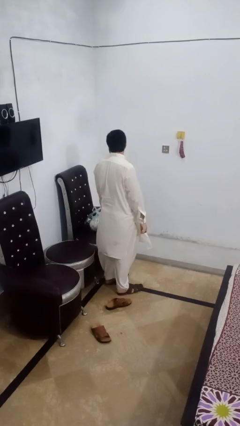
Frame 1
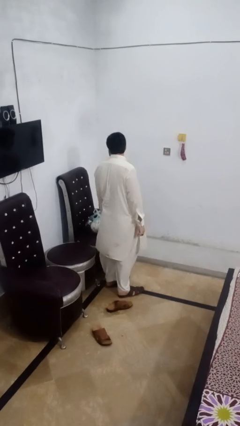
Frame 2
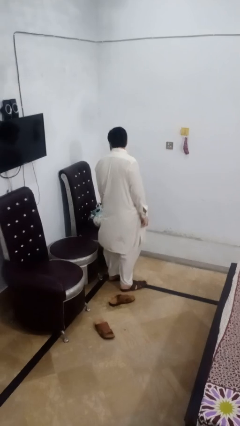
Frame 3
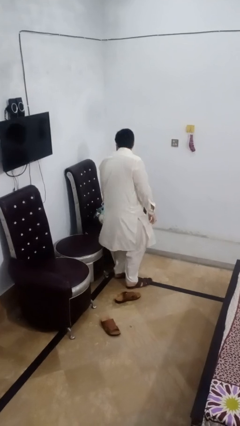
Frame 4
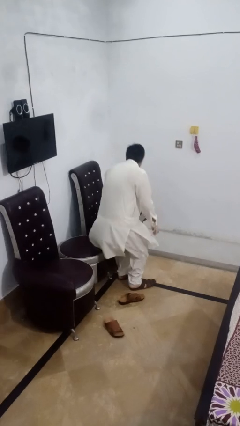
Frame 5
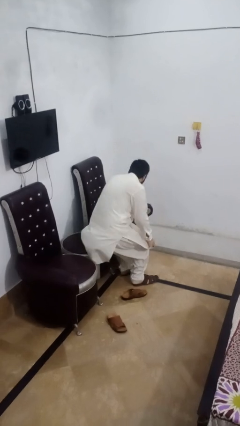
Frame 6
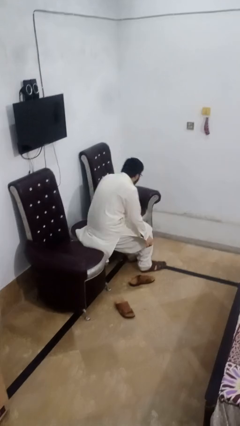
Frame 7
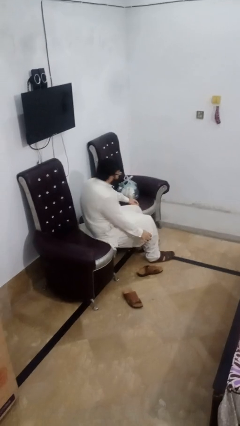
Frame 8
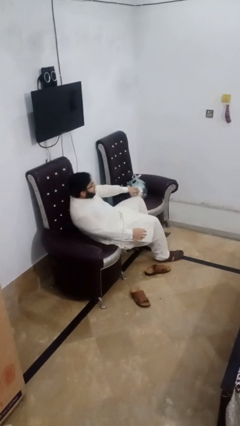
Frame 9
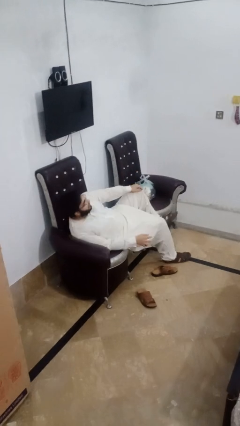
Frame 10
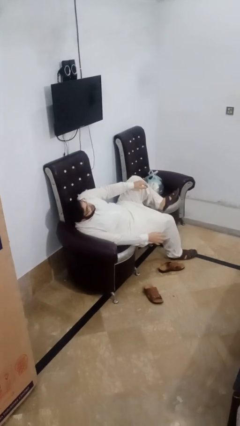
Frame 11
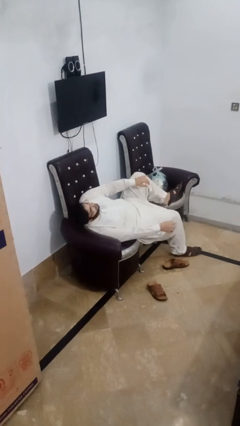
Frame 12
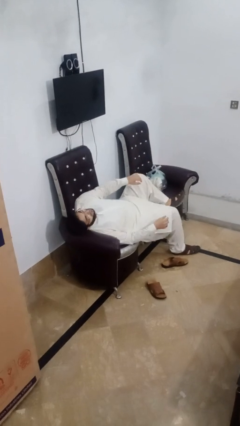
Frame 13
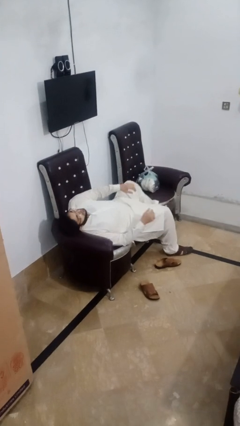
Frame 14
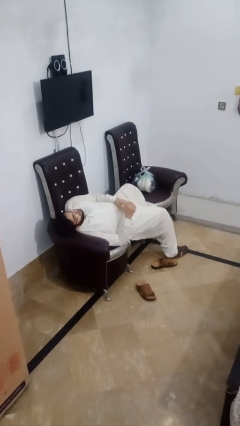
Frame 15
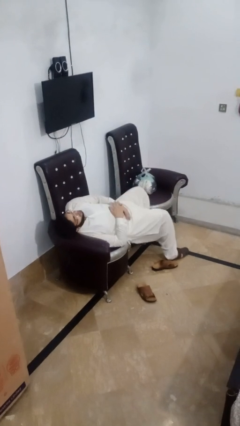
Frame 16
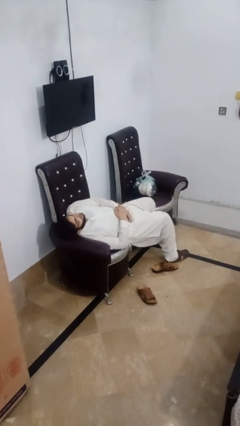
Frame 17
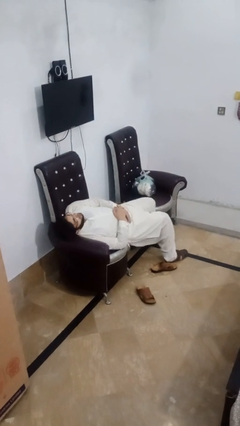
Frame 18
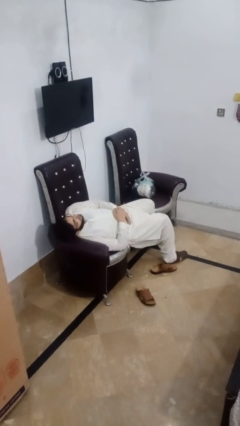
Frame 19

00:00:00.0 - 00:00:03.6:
person lies down on couch

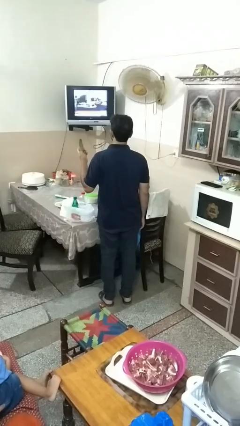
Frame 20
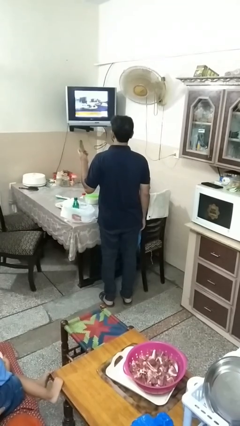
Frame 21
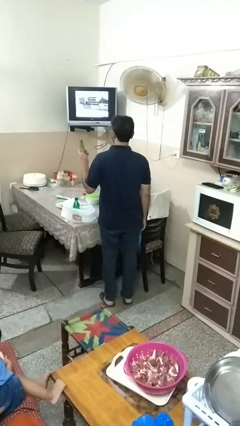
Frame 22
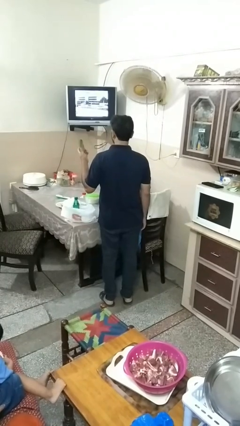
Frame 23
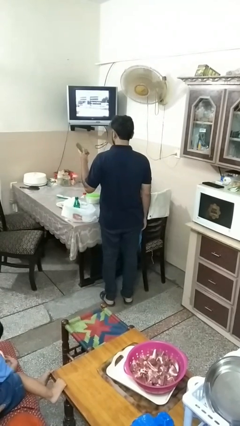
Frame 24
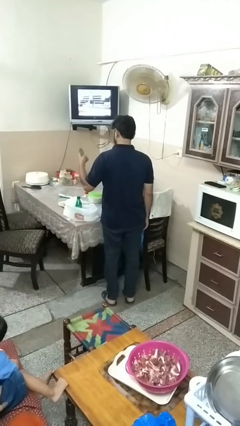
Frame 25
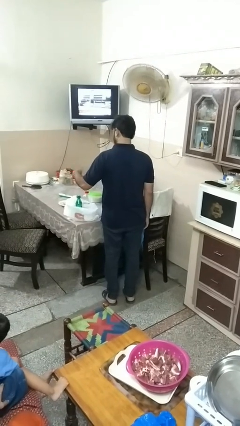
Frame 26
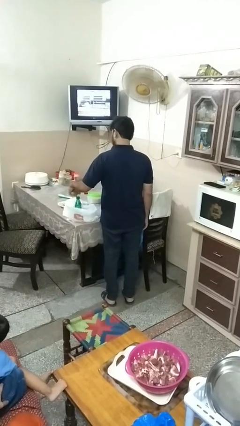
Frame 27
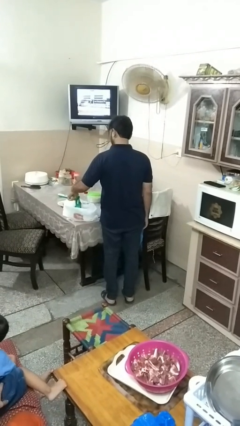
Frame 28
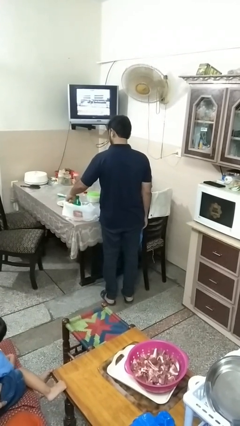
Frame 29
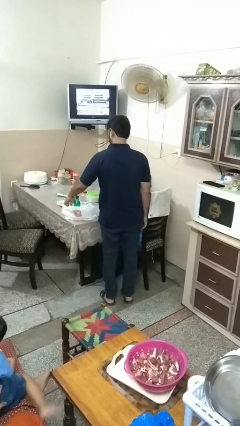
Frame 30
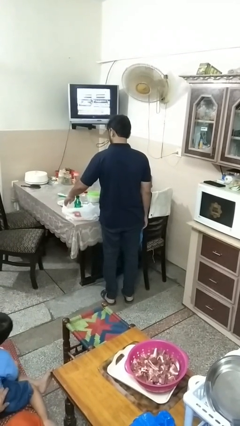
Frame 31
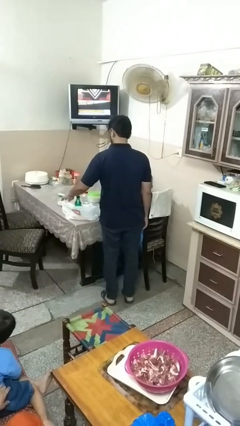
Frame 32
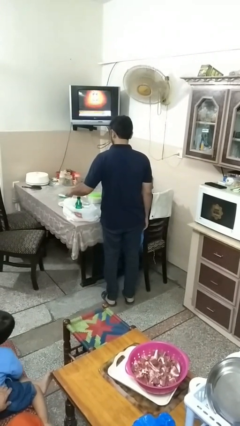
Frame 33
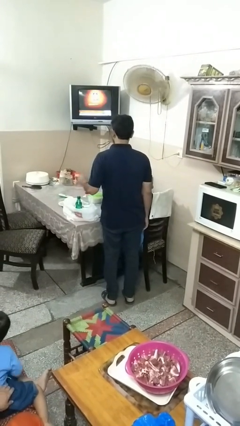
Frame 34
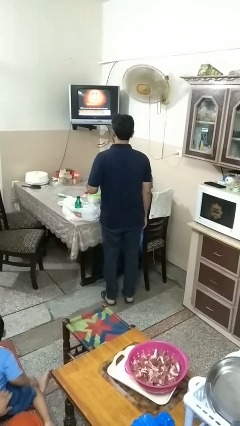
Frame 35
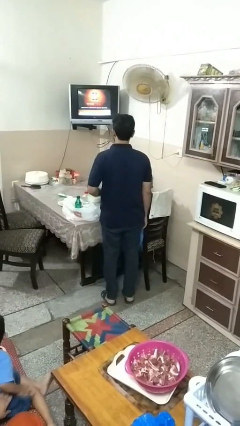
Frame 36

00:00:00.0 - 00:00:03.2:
person puts object into bag

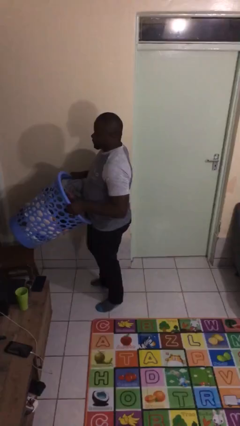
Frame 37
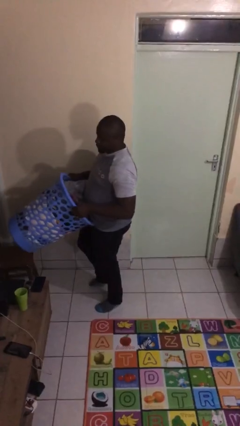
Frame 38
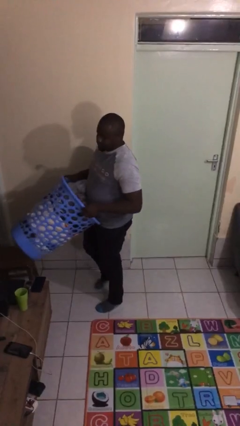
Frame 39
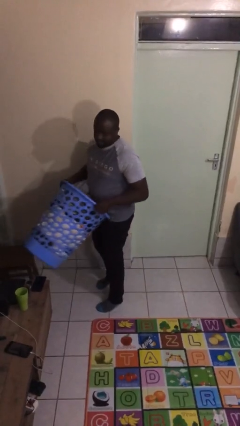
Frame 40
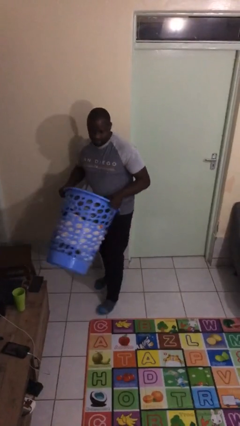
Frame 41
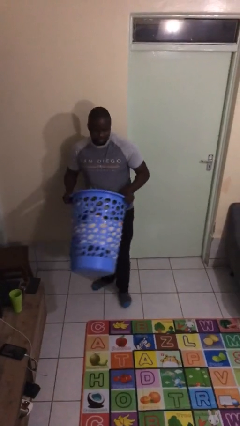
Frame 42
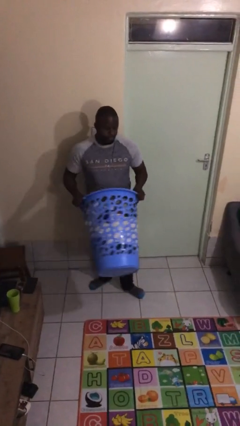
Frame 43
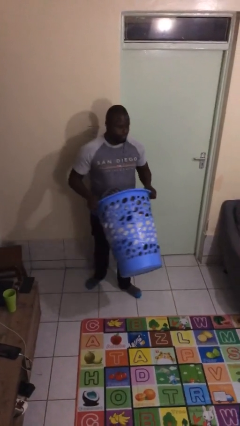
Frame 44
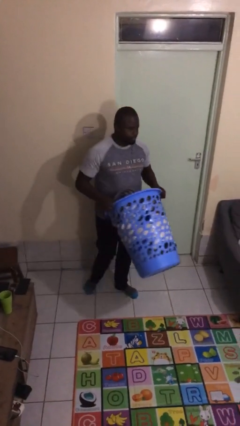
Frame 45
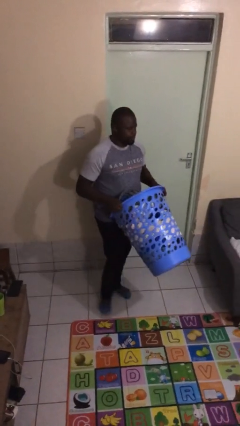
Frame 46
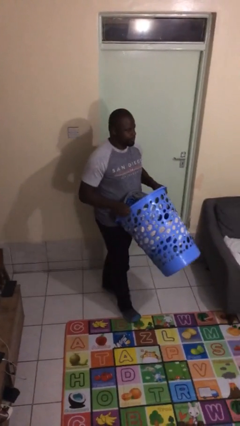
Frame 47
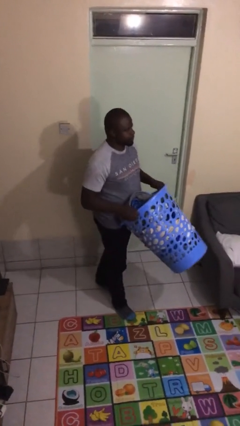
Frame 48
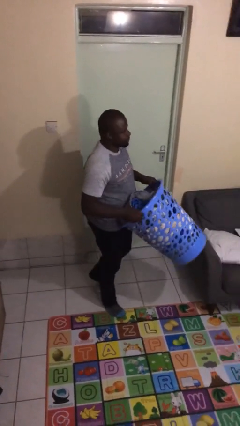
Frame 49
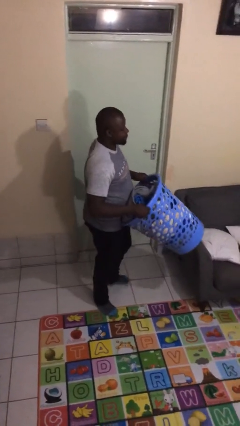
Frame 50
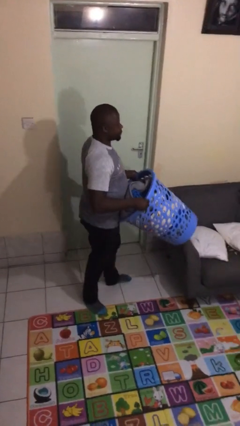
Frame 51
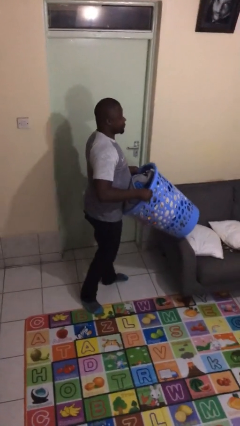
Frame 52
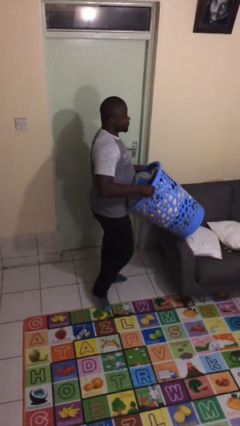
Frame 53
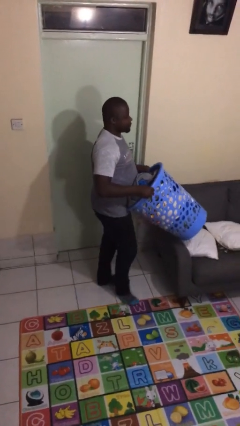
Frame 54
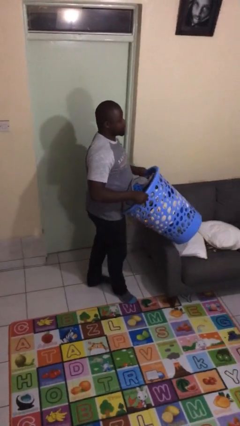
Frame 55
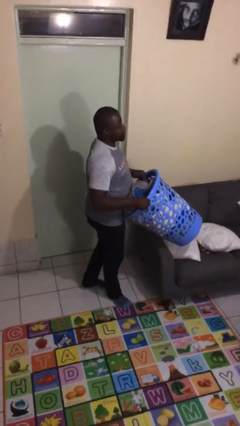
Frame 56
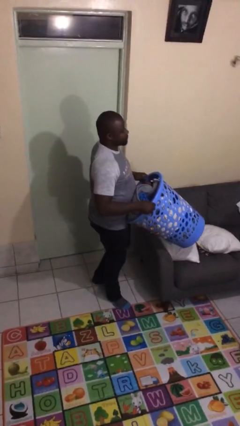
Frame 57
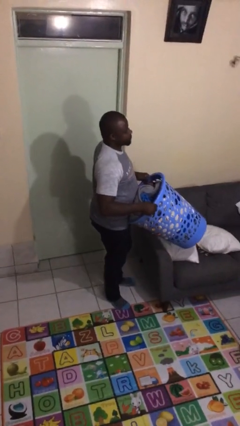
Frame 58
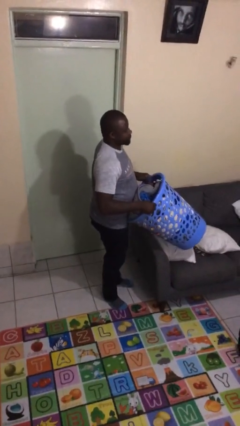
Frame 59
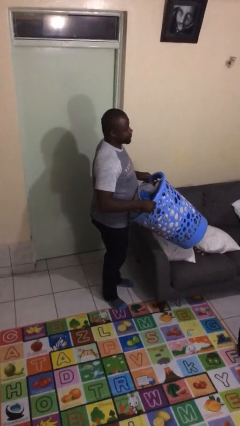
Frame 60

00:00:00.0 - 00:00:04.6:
person carries laundry basket

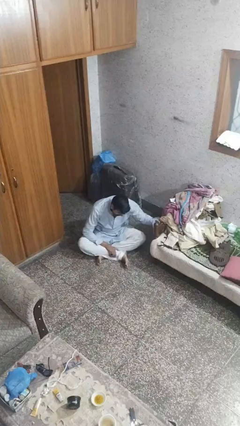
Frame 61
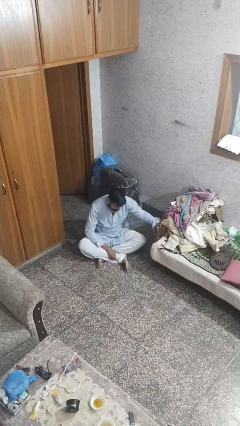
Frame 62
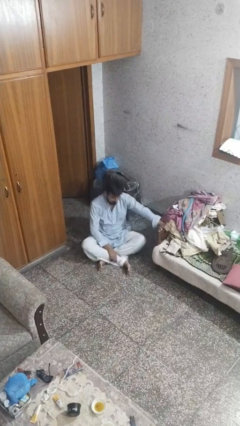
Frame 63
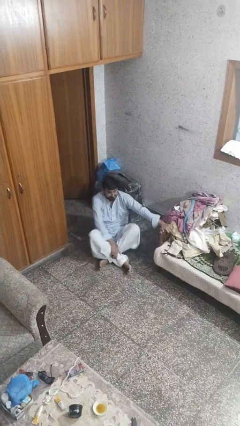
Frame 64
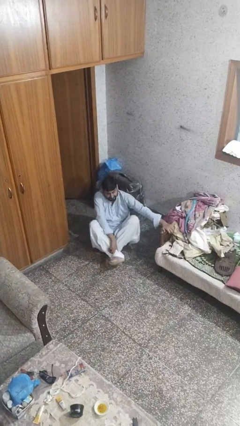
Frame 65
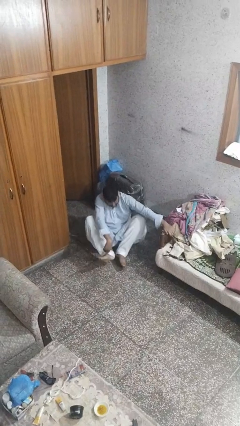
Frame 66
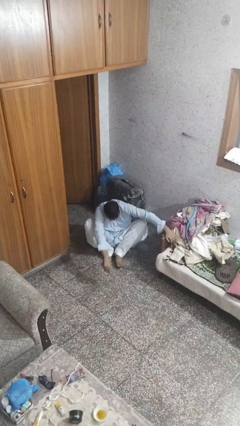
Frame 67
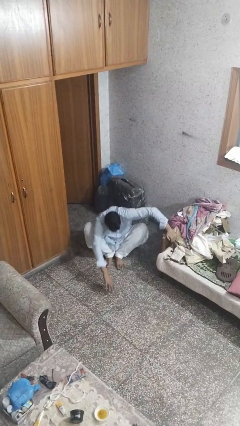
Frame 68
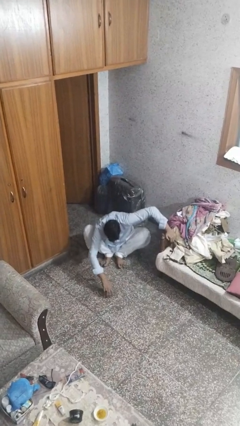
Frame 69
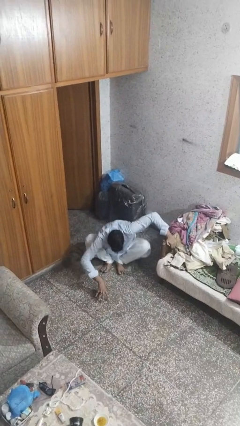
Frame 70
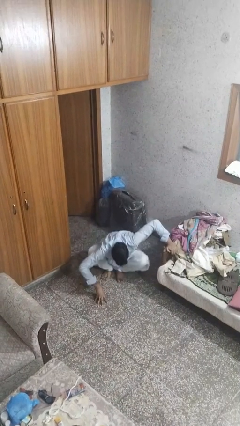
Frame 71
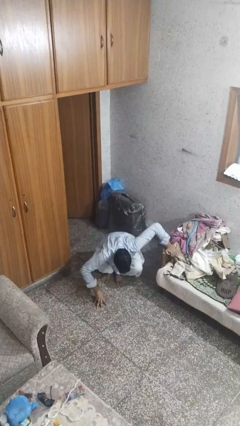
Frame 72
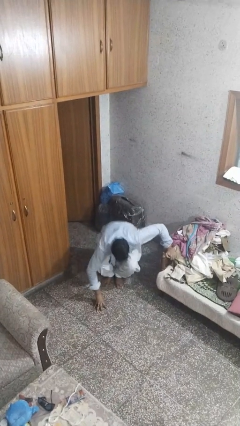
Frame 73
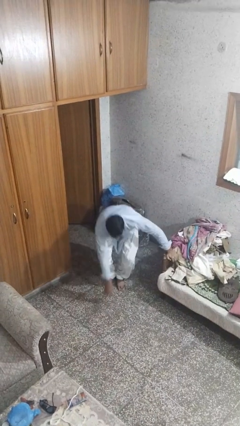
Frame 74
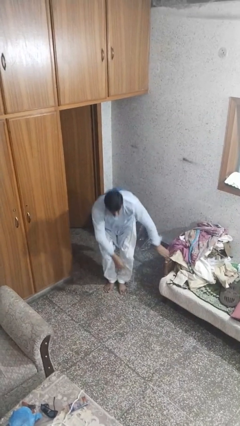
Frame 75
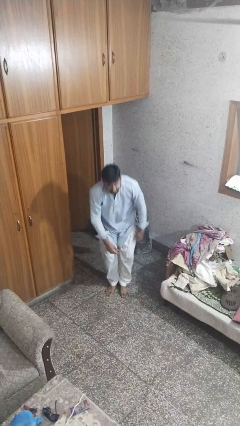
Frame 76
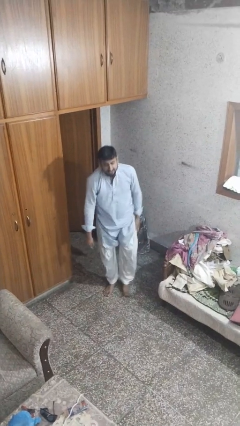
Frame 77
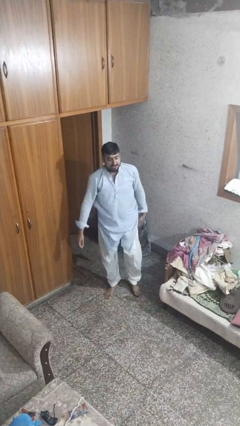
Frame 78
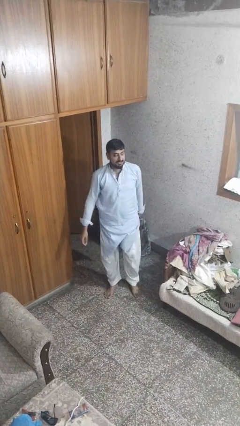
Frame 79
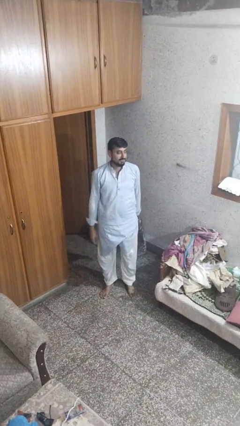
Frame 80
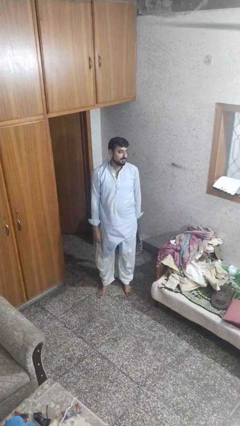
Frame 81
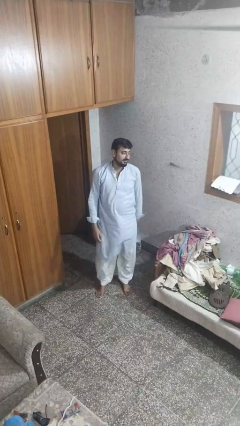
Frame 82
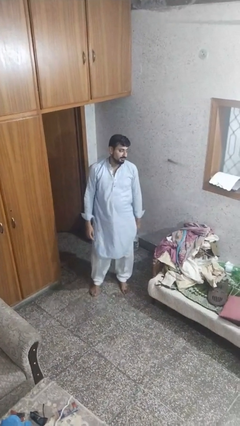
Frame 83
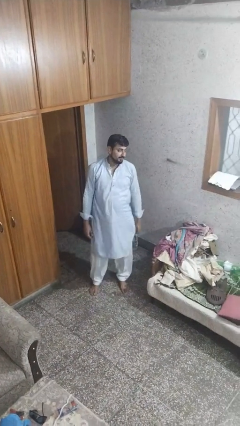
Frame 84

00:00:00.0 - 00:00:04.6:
person stands up from floor

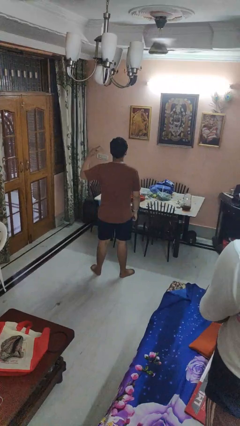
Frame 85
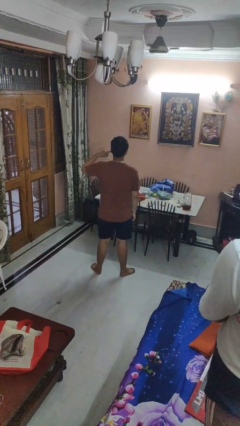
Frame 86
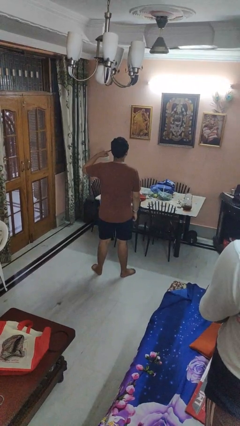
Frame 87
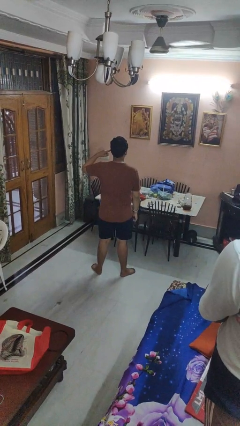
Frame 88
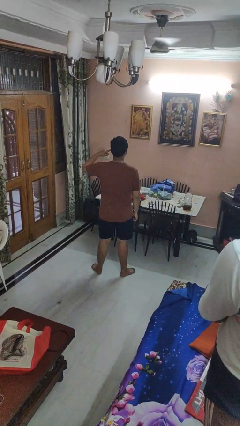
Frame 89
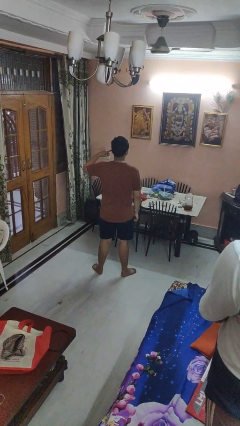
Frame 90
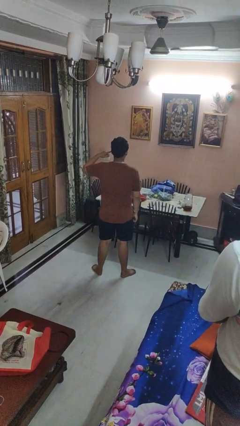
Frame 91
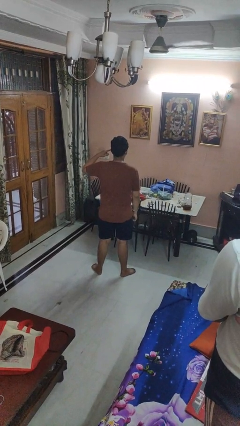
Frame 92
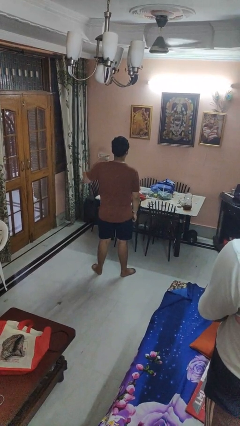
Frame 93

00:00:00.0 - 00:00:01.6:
person gestures listen closely

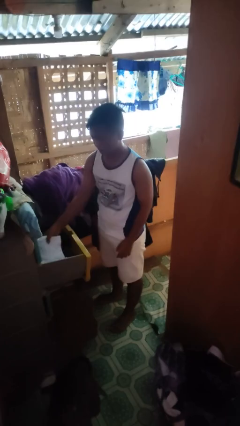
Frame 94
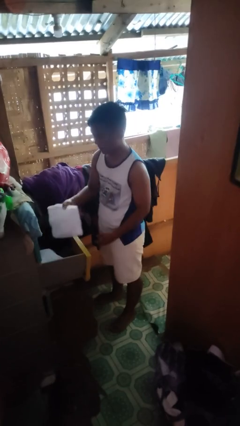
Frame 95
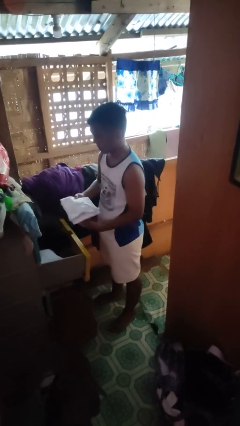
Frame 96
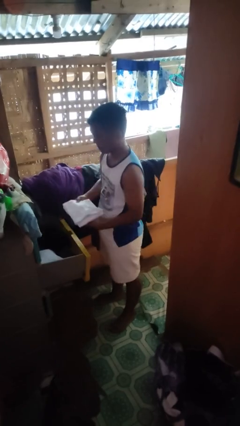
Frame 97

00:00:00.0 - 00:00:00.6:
person takes clothes from dresser
